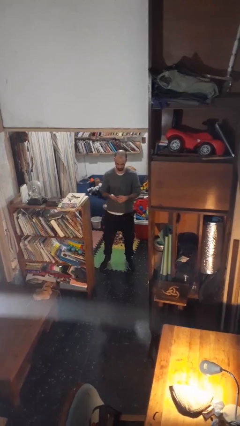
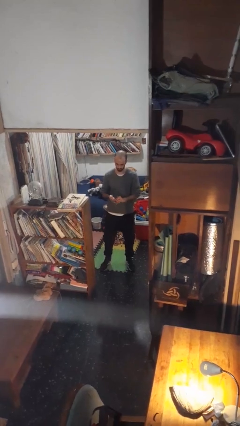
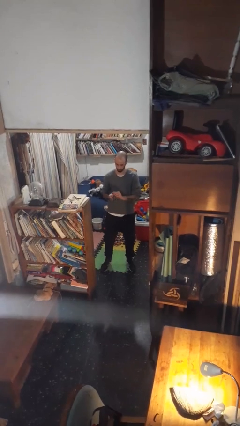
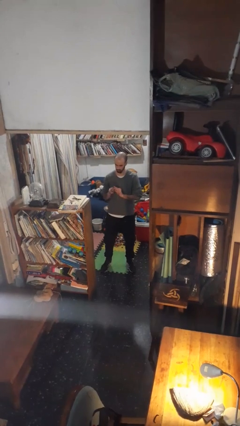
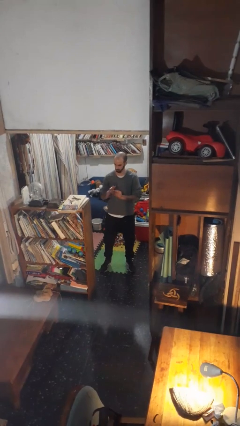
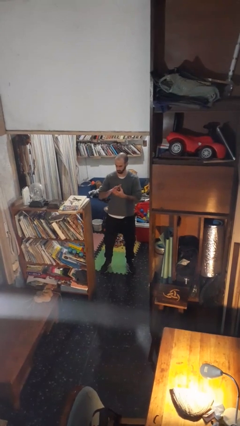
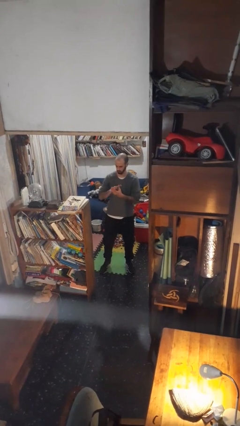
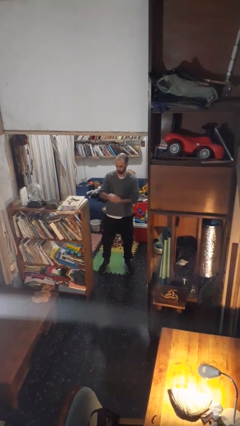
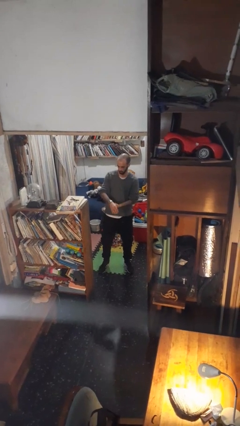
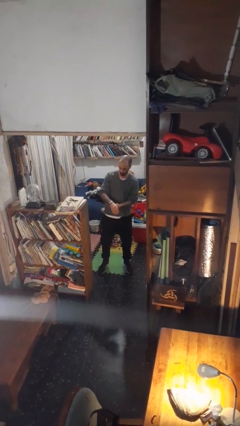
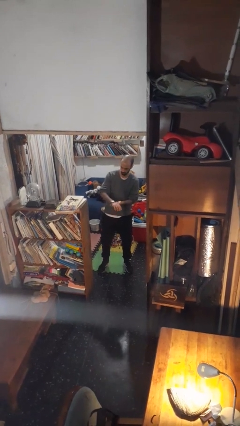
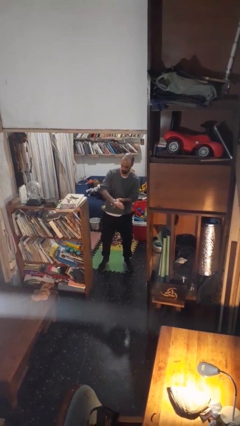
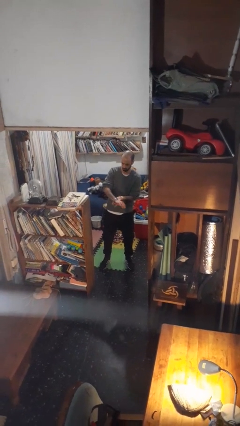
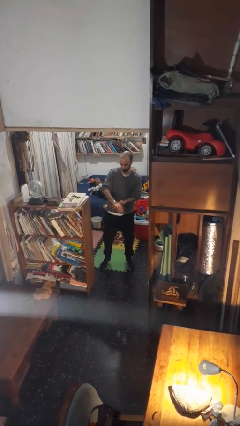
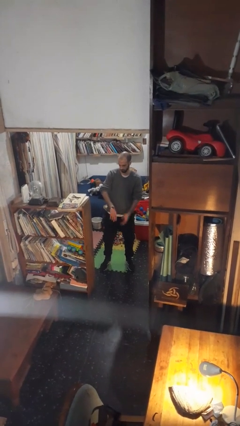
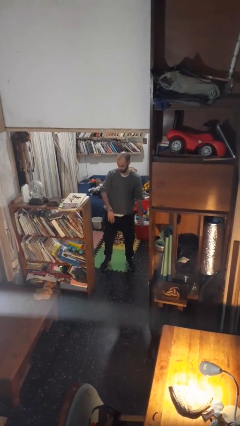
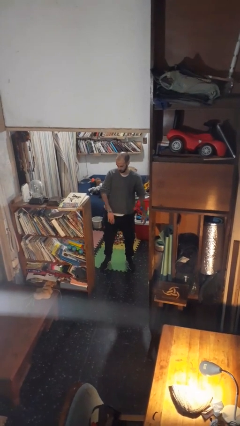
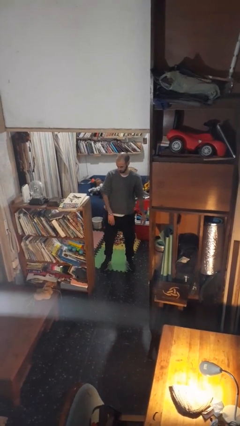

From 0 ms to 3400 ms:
person puts on wristwatch

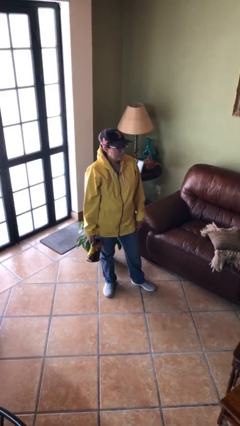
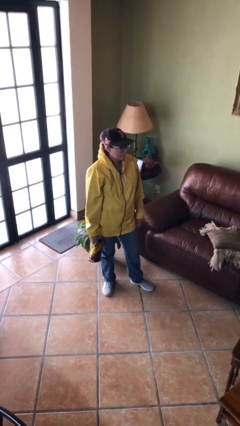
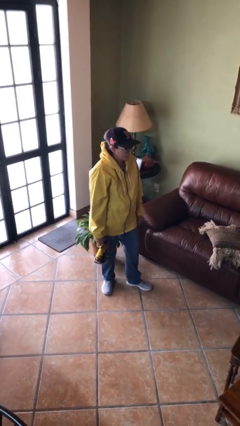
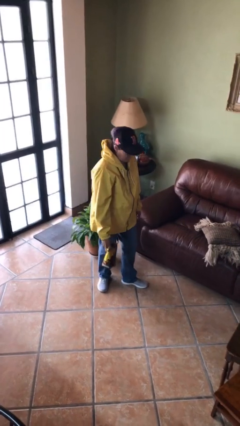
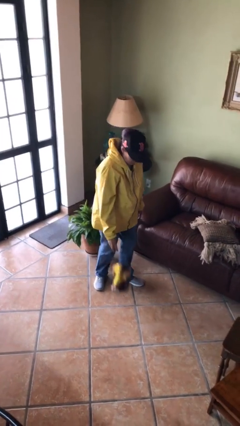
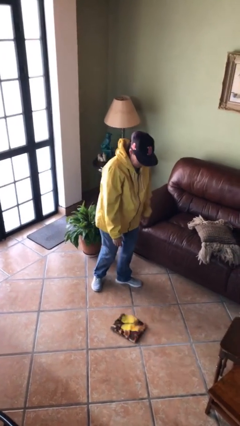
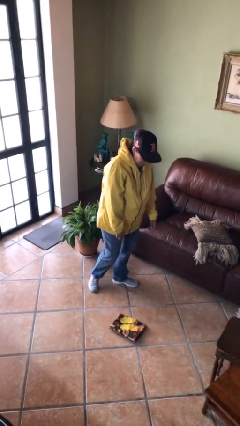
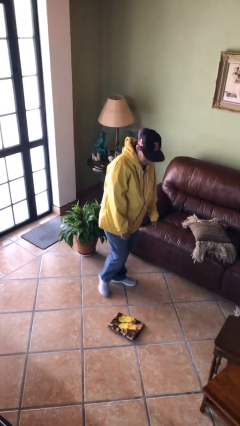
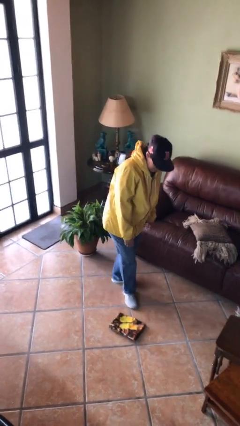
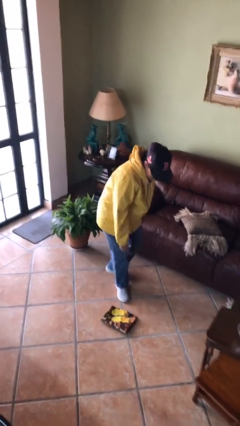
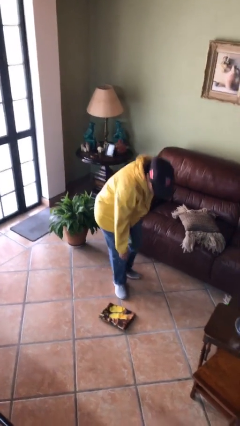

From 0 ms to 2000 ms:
person drops object

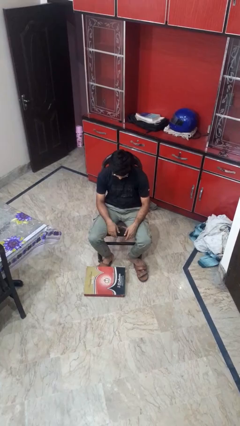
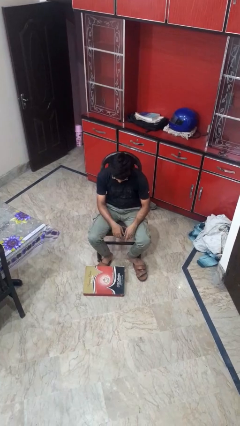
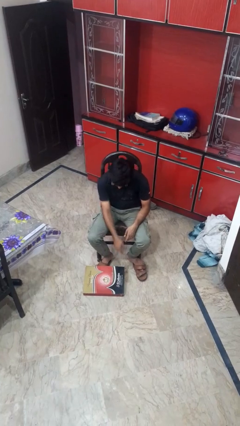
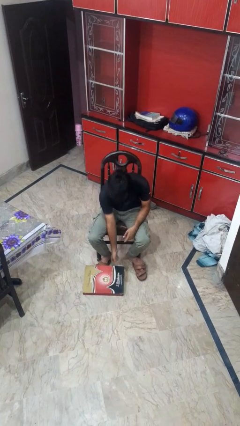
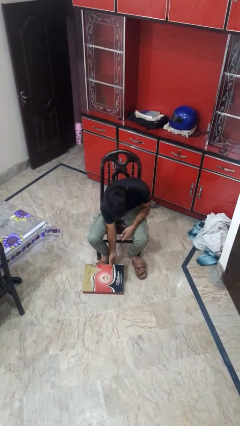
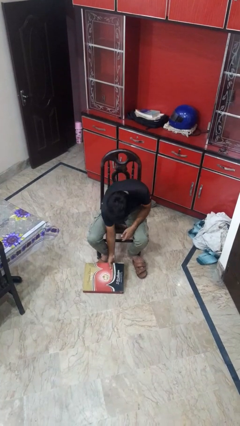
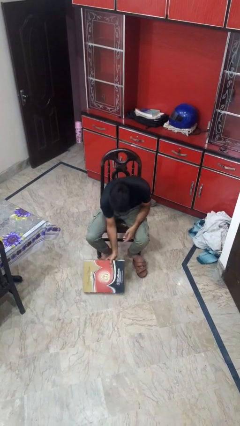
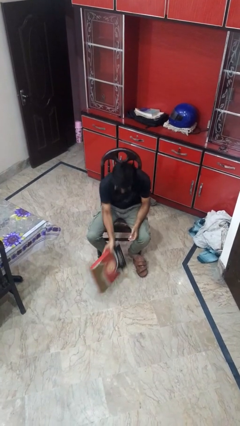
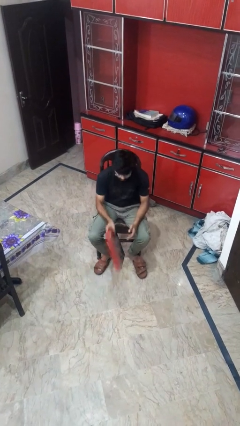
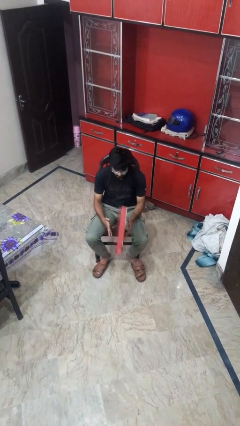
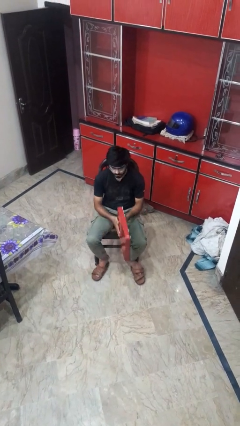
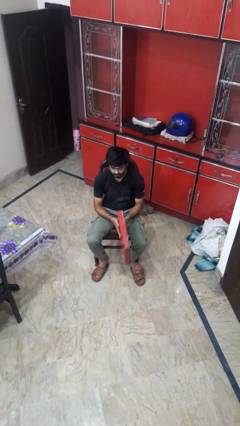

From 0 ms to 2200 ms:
person picks up object from floor

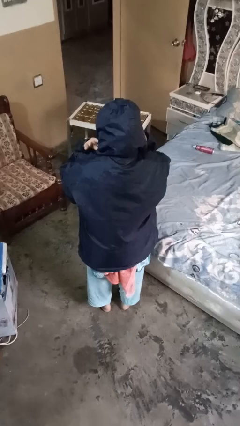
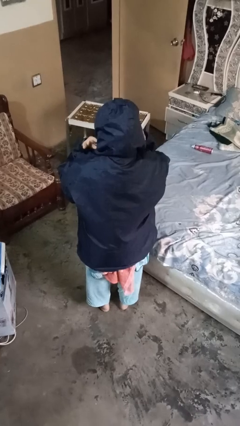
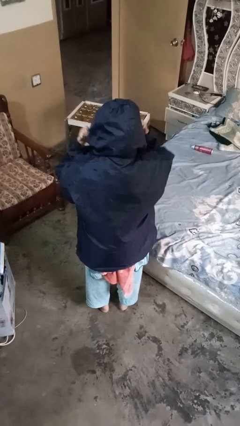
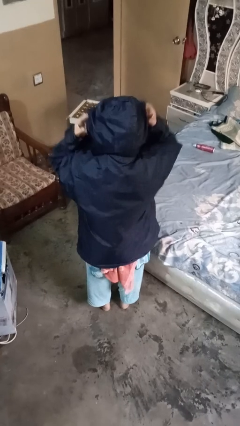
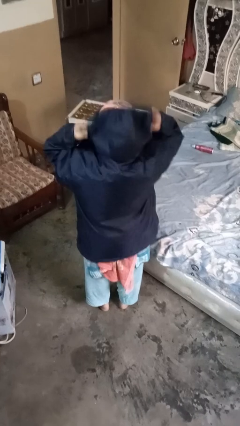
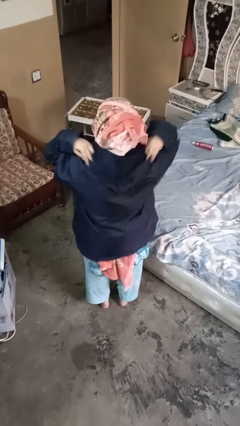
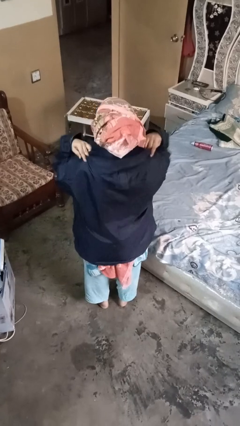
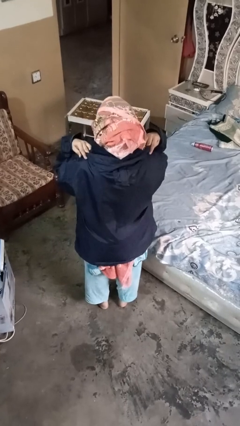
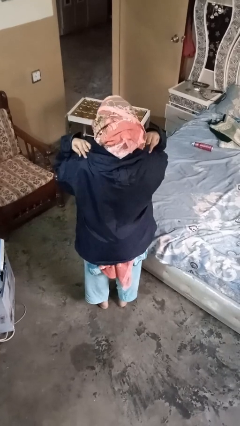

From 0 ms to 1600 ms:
person takes off hoodie

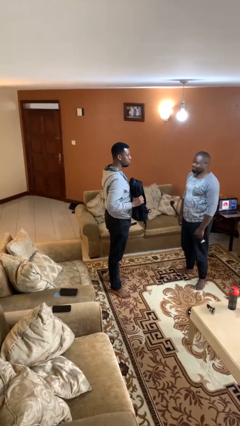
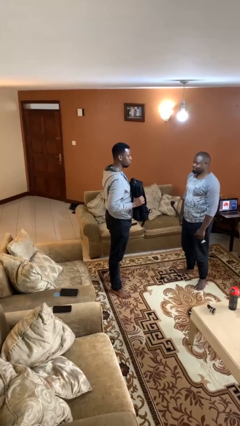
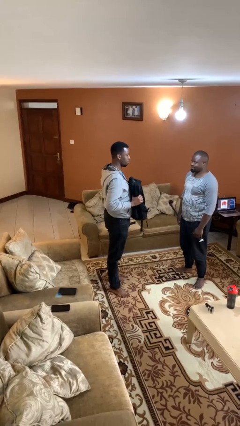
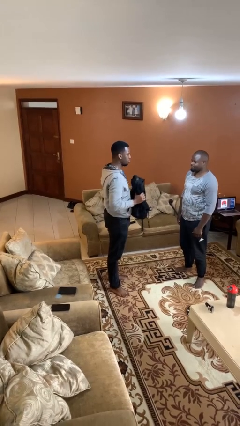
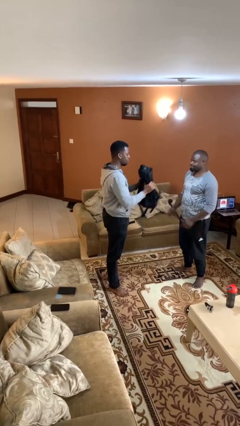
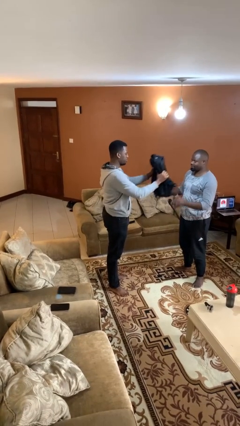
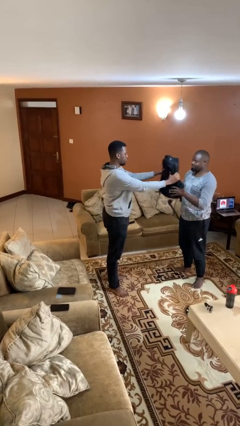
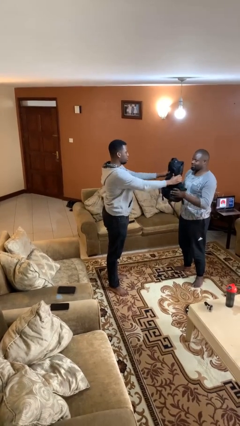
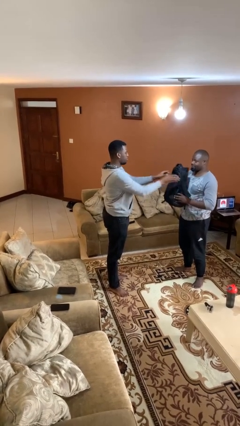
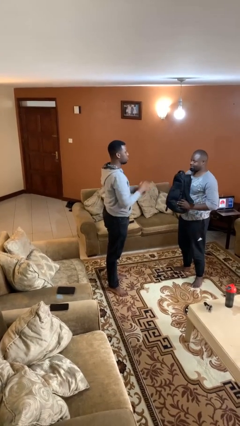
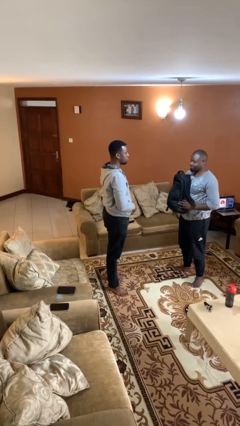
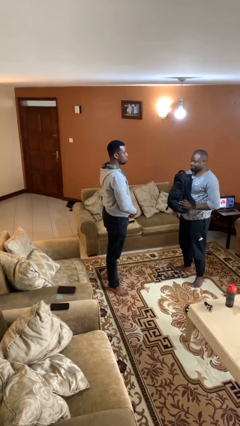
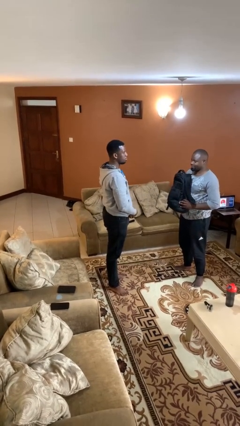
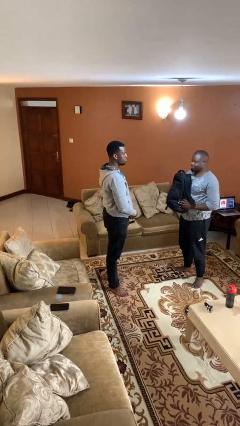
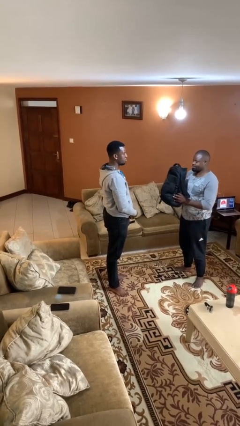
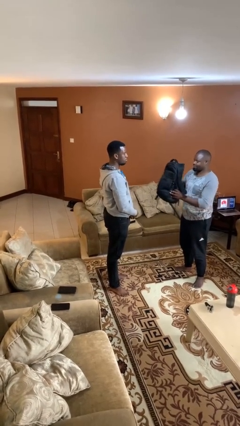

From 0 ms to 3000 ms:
person transfers object to person

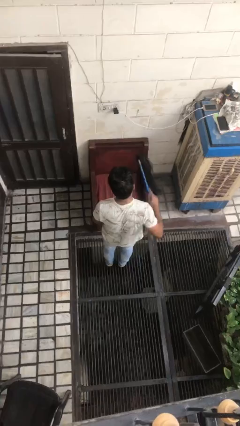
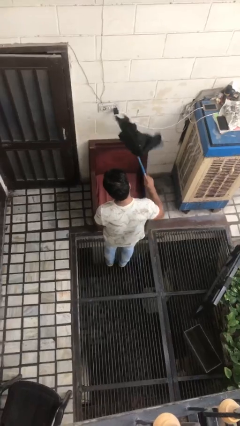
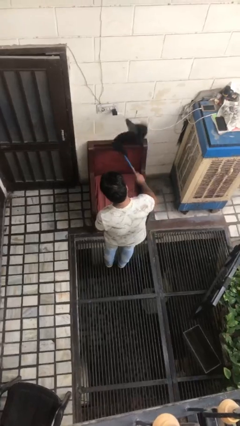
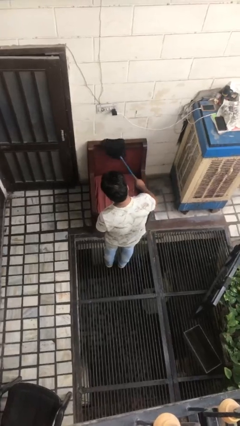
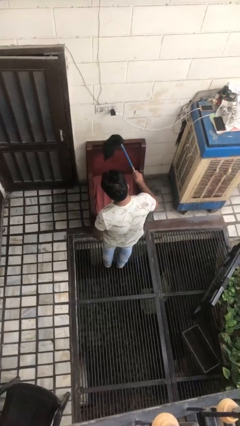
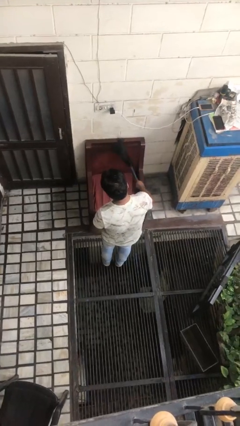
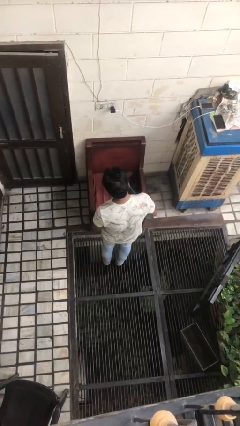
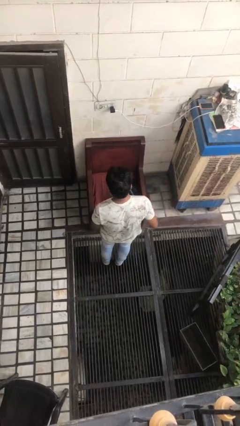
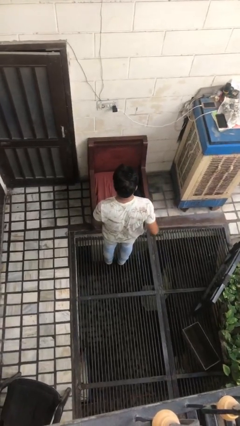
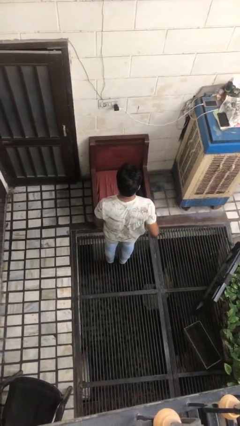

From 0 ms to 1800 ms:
person dusts furniture

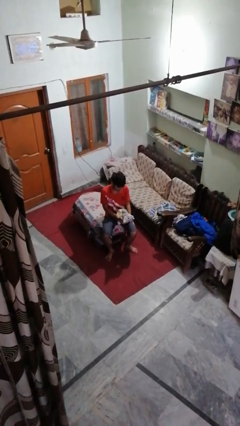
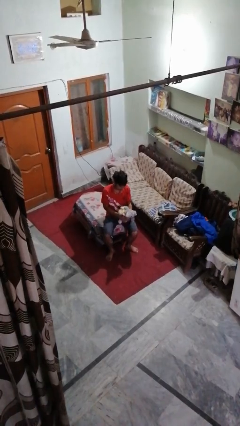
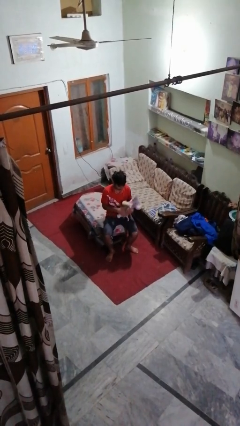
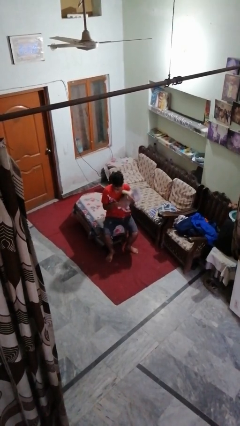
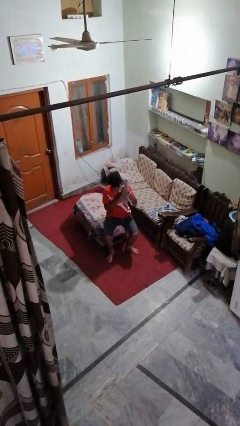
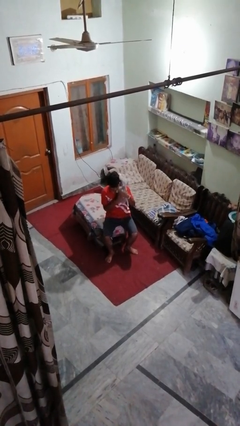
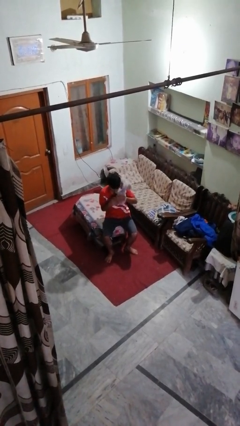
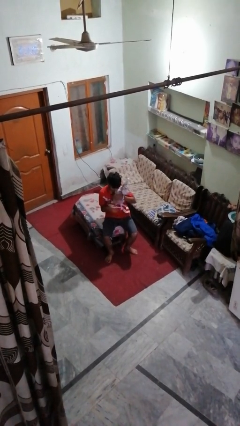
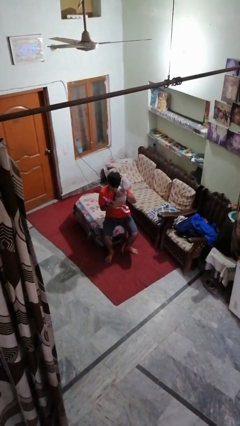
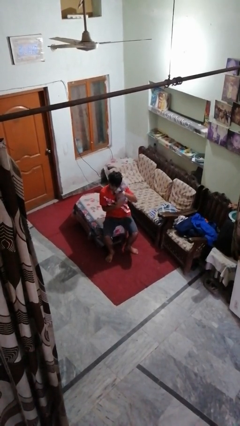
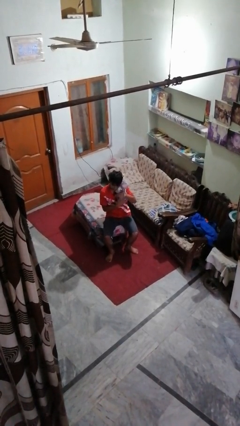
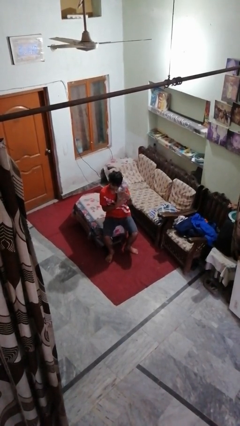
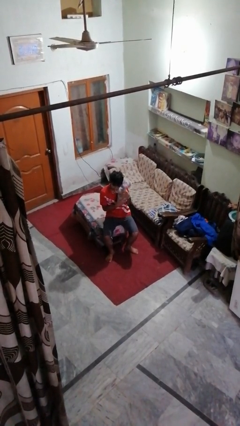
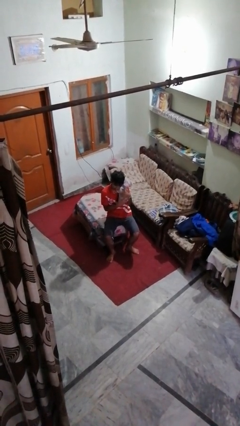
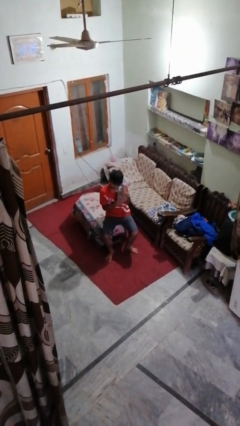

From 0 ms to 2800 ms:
person hugs stuffed animal

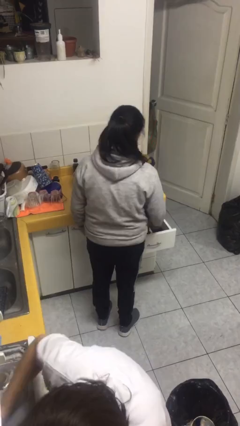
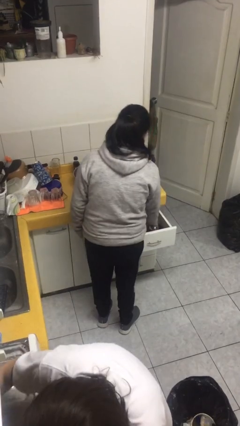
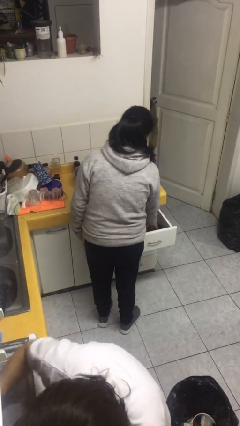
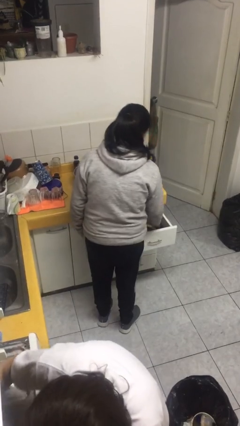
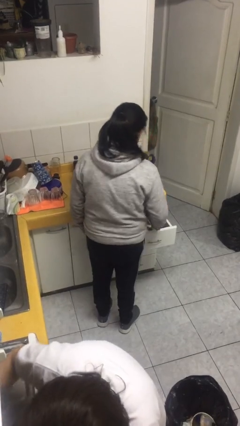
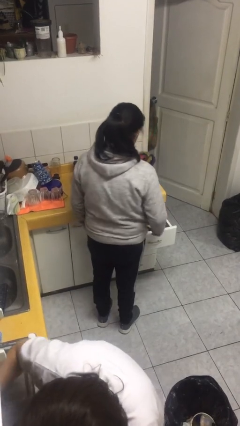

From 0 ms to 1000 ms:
person puts object into kitchen drawer
